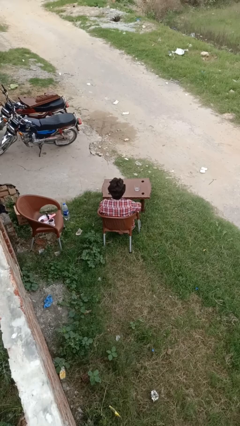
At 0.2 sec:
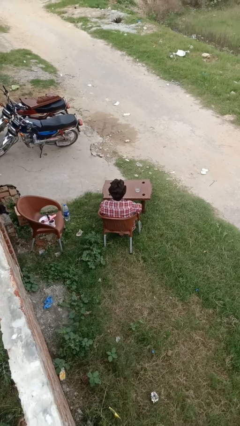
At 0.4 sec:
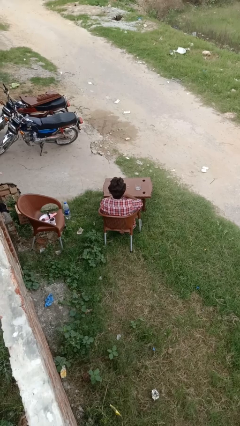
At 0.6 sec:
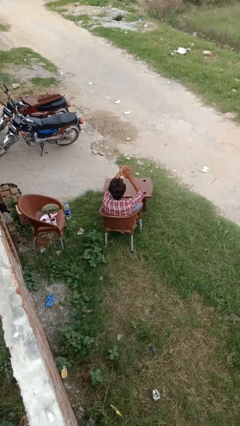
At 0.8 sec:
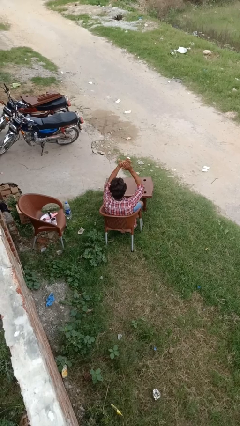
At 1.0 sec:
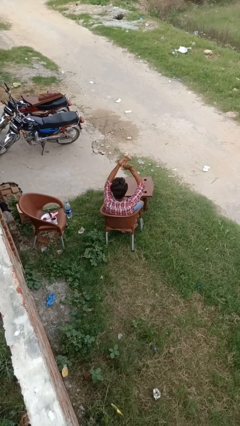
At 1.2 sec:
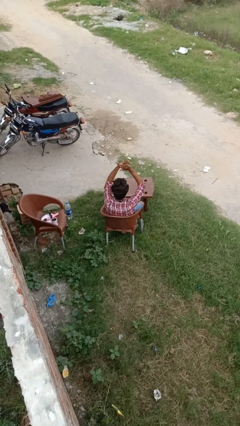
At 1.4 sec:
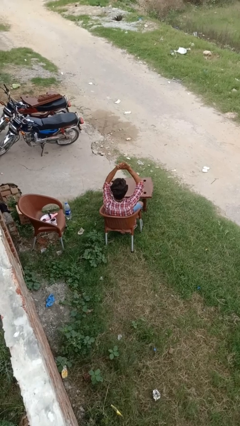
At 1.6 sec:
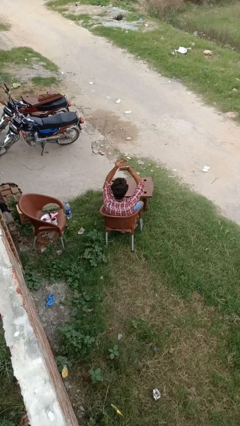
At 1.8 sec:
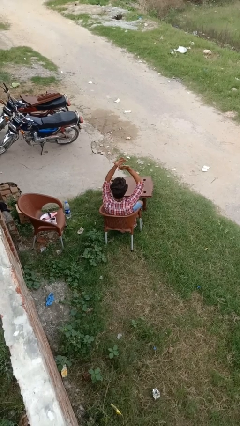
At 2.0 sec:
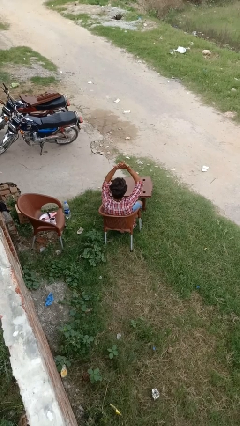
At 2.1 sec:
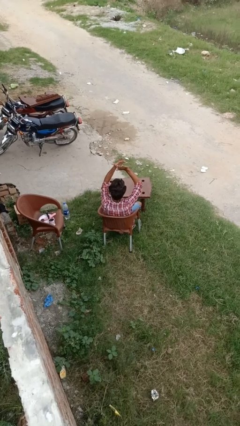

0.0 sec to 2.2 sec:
person claps hands

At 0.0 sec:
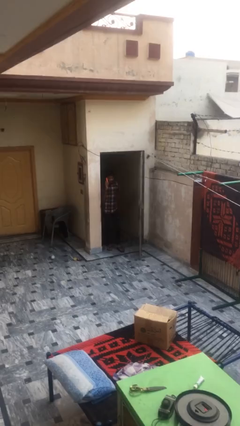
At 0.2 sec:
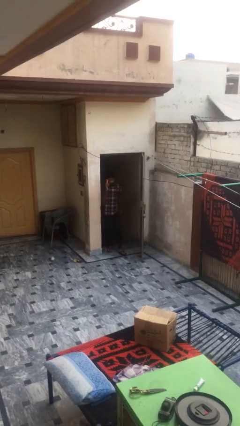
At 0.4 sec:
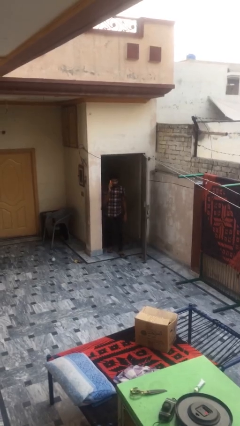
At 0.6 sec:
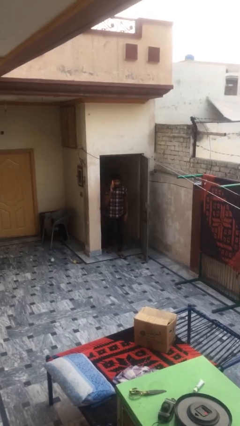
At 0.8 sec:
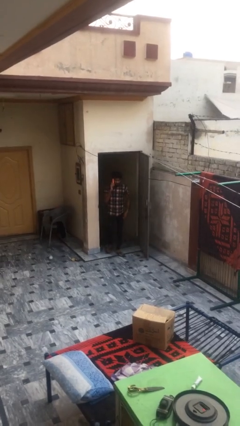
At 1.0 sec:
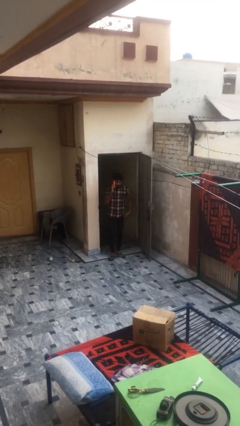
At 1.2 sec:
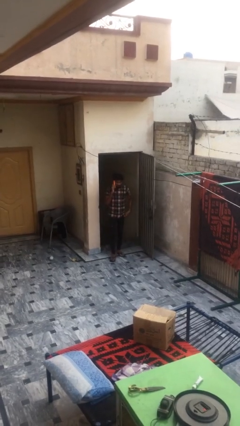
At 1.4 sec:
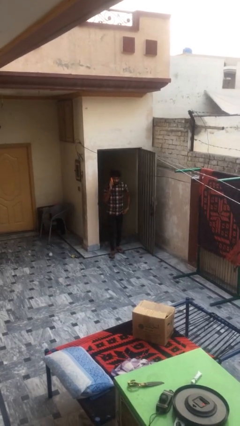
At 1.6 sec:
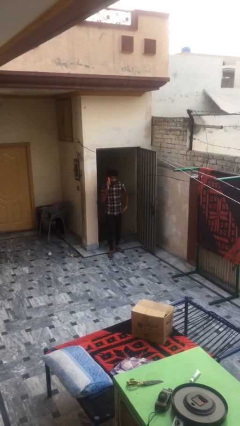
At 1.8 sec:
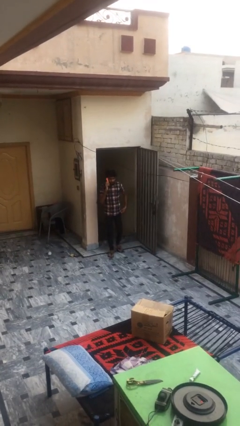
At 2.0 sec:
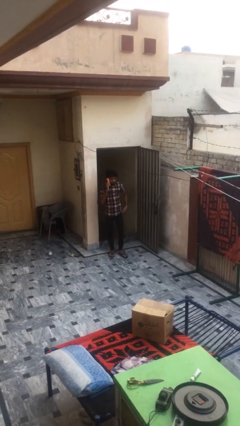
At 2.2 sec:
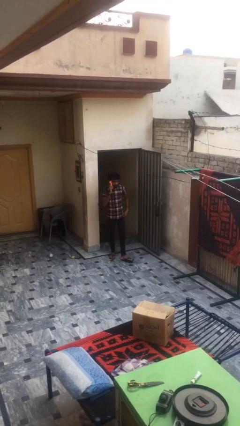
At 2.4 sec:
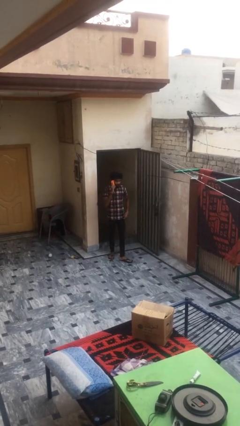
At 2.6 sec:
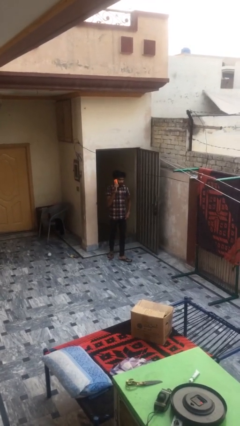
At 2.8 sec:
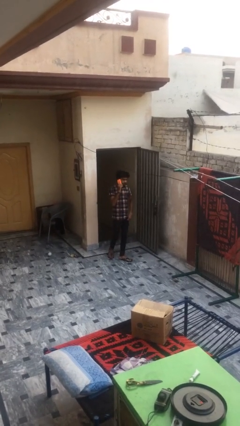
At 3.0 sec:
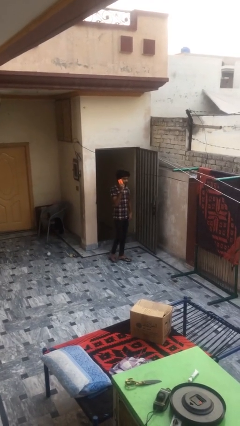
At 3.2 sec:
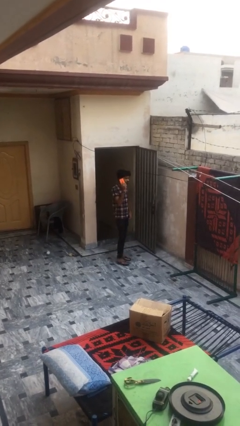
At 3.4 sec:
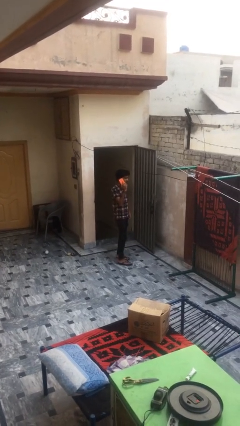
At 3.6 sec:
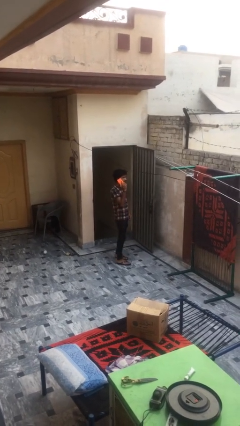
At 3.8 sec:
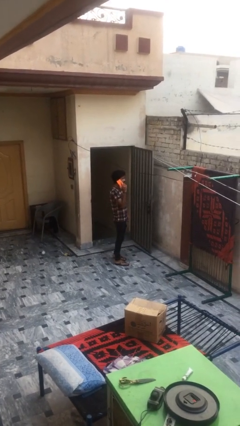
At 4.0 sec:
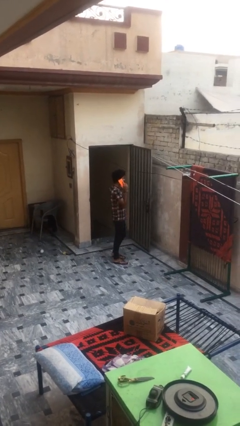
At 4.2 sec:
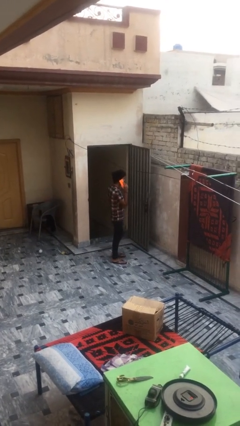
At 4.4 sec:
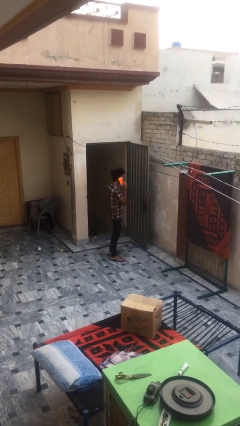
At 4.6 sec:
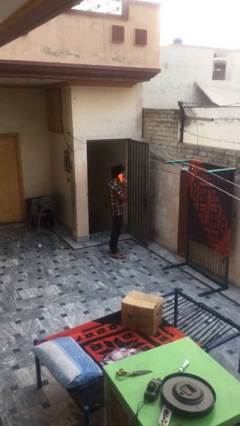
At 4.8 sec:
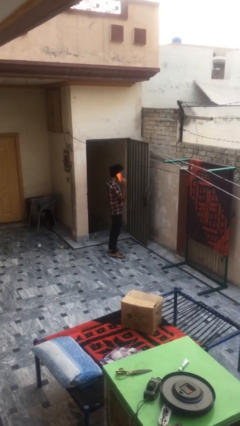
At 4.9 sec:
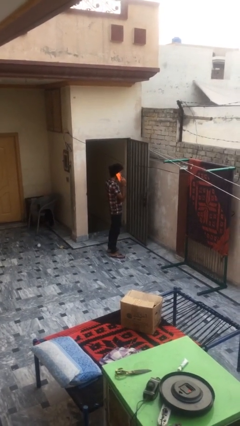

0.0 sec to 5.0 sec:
person enters scene through structure

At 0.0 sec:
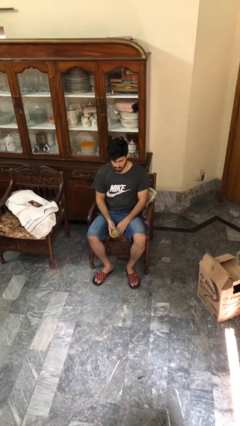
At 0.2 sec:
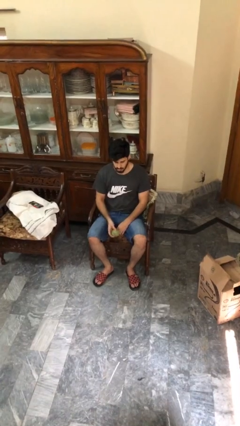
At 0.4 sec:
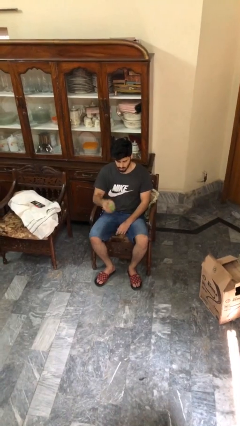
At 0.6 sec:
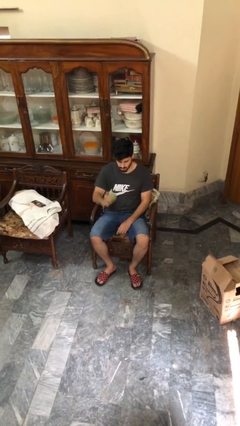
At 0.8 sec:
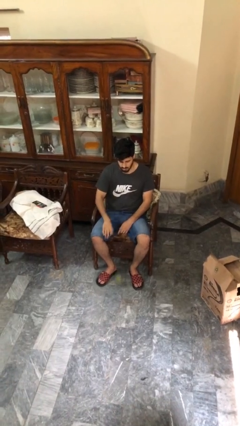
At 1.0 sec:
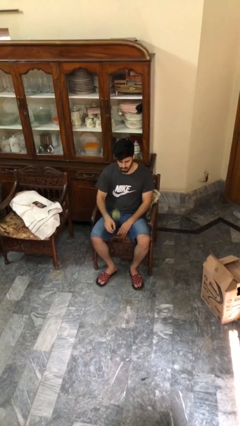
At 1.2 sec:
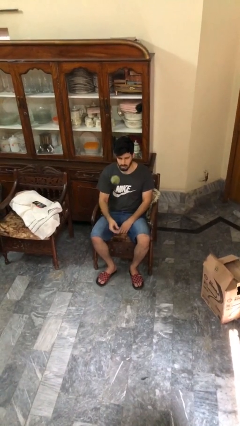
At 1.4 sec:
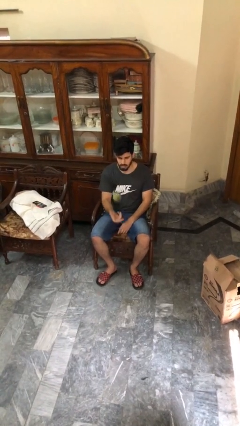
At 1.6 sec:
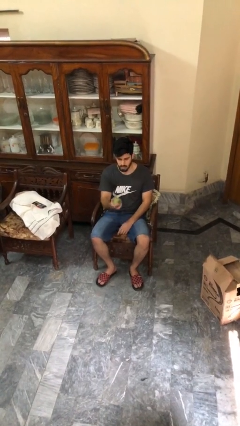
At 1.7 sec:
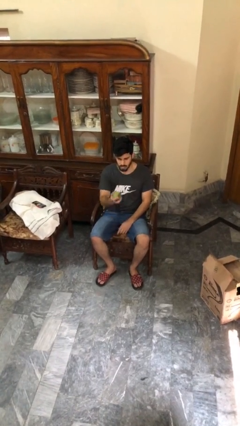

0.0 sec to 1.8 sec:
person bounces ball on floor

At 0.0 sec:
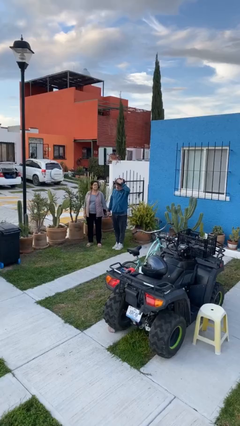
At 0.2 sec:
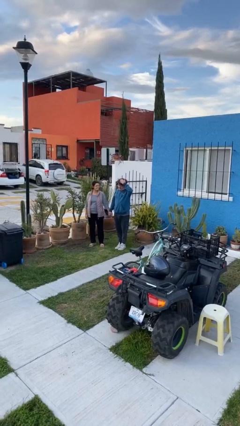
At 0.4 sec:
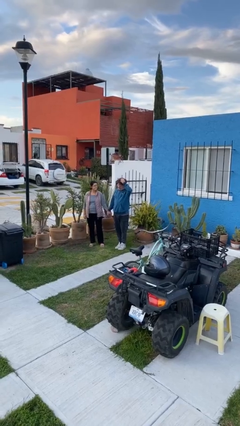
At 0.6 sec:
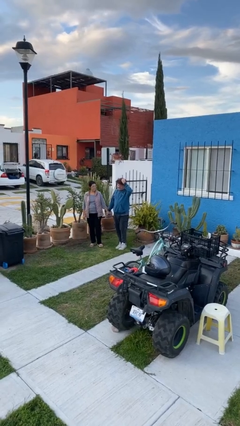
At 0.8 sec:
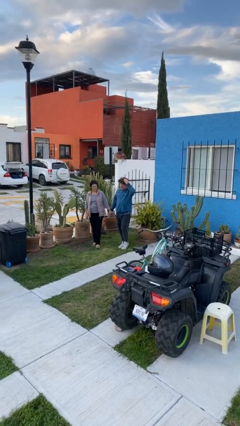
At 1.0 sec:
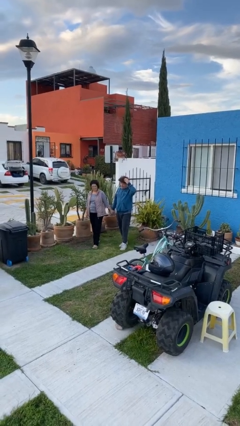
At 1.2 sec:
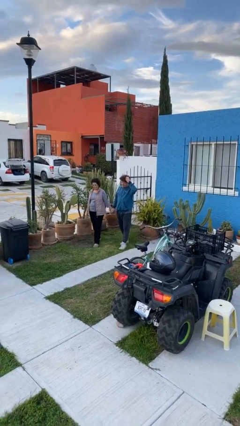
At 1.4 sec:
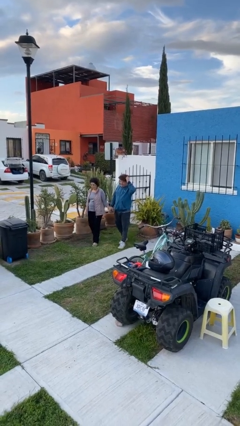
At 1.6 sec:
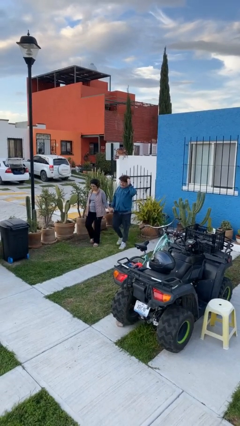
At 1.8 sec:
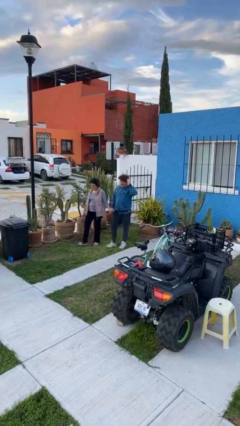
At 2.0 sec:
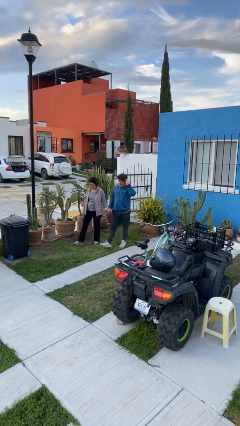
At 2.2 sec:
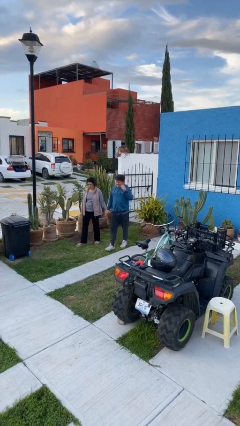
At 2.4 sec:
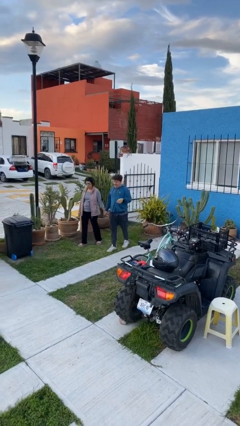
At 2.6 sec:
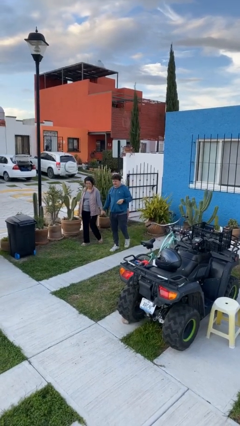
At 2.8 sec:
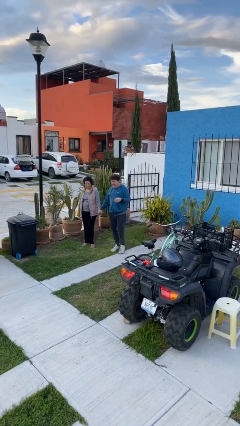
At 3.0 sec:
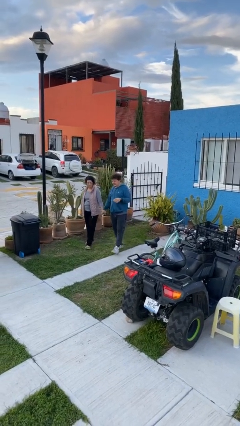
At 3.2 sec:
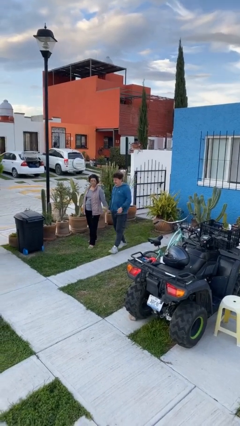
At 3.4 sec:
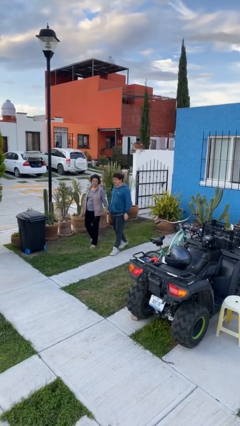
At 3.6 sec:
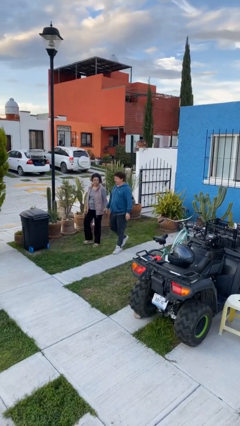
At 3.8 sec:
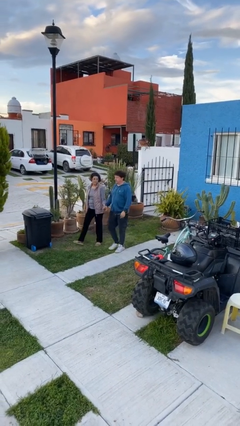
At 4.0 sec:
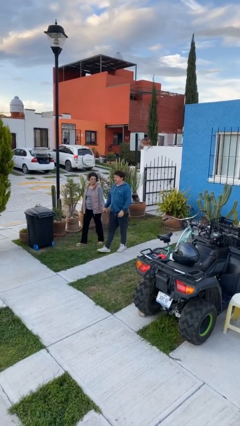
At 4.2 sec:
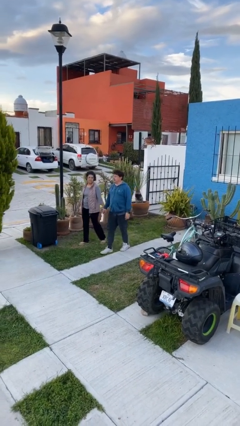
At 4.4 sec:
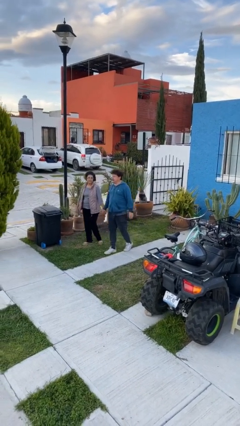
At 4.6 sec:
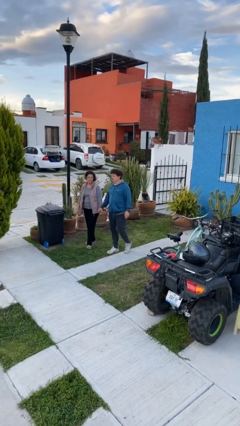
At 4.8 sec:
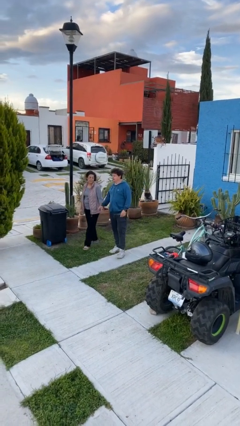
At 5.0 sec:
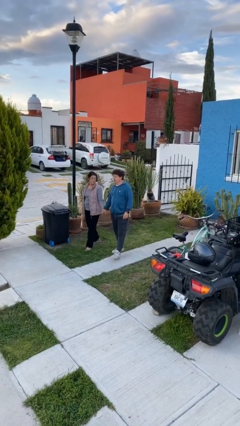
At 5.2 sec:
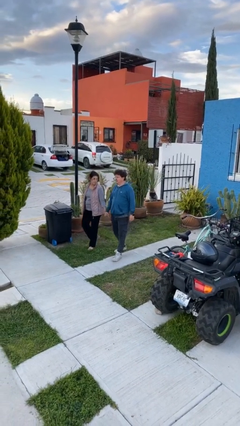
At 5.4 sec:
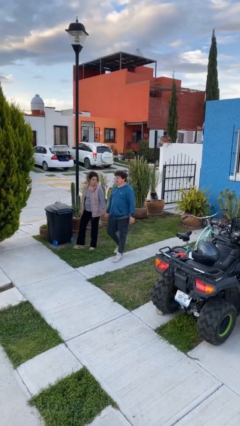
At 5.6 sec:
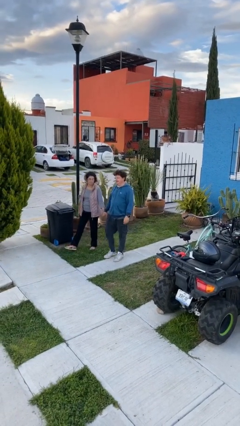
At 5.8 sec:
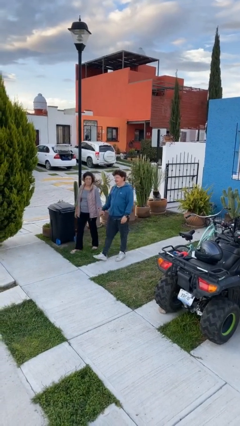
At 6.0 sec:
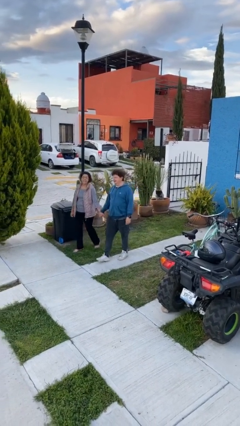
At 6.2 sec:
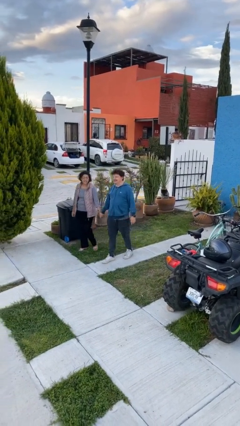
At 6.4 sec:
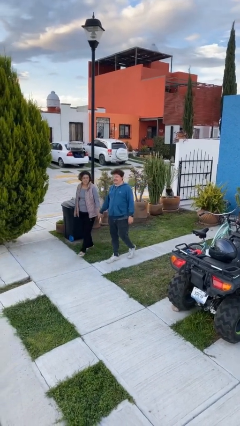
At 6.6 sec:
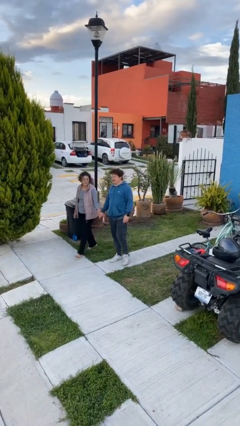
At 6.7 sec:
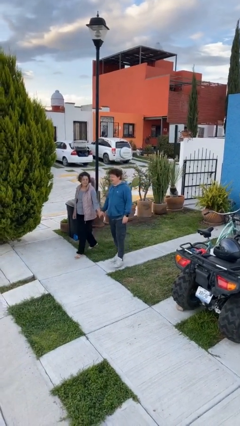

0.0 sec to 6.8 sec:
person holds hand

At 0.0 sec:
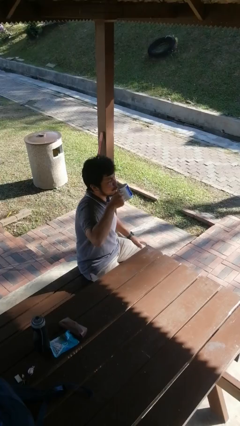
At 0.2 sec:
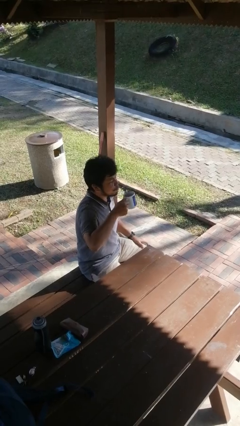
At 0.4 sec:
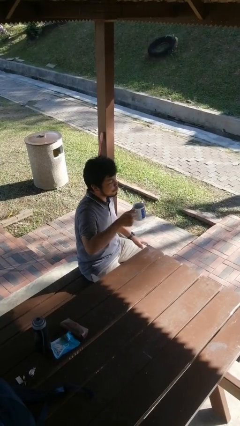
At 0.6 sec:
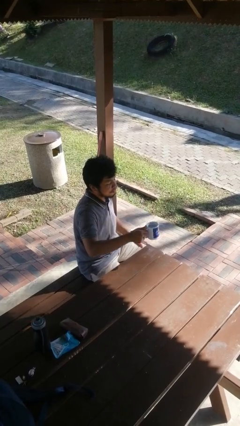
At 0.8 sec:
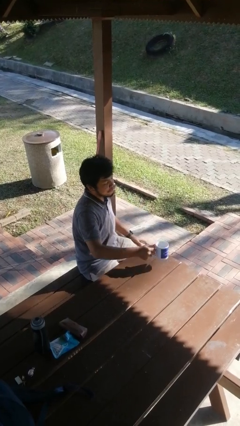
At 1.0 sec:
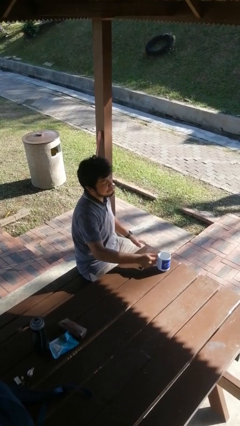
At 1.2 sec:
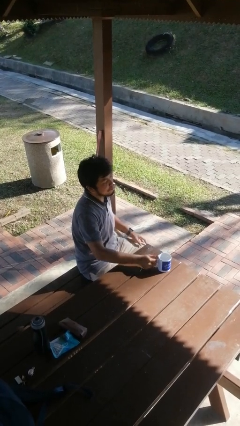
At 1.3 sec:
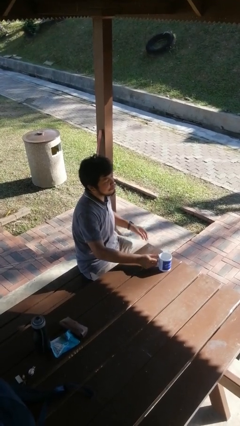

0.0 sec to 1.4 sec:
person puts down object on table
